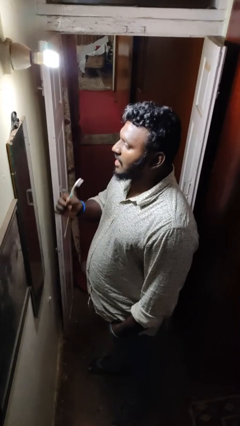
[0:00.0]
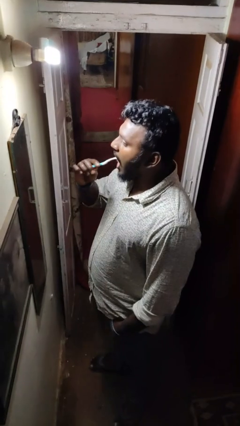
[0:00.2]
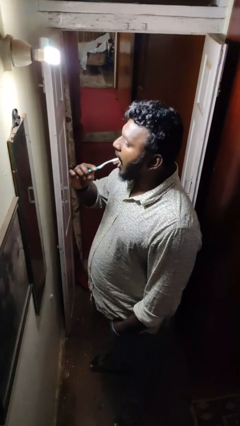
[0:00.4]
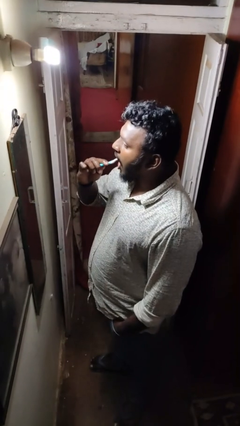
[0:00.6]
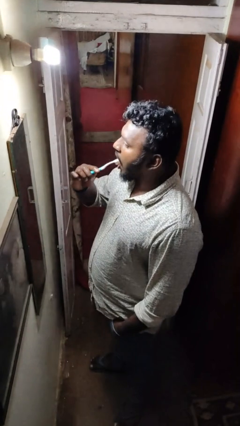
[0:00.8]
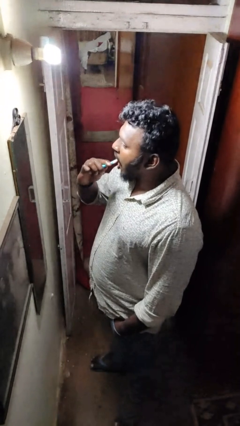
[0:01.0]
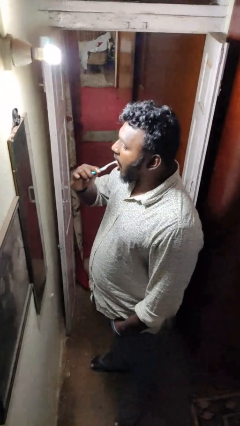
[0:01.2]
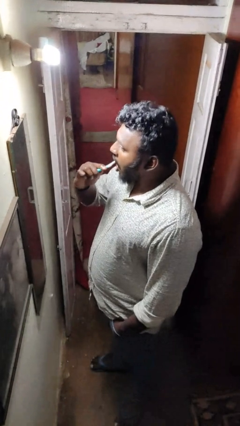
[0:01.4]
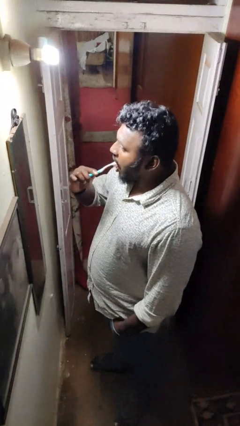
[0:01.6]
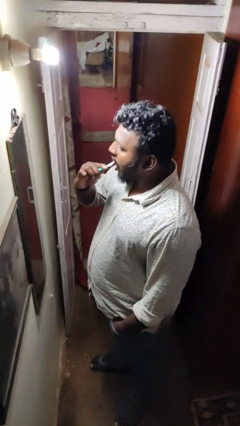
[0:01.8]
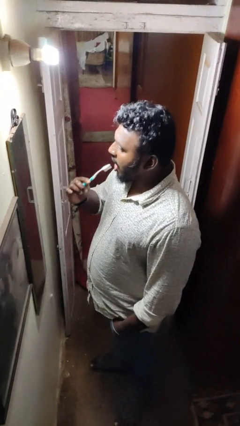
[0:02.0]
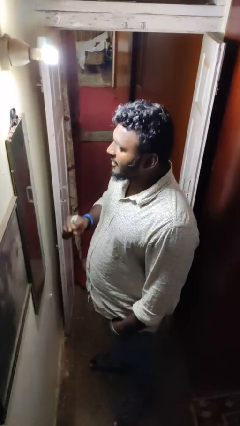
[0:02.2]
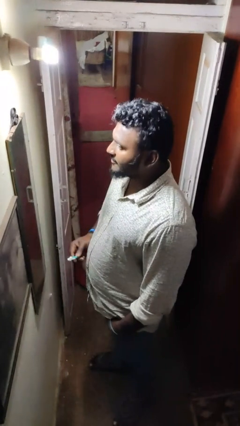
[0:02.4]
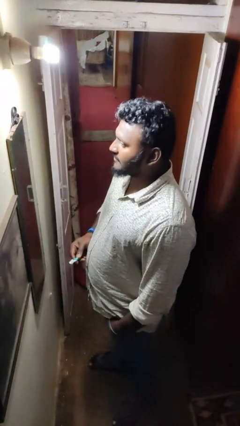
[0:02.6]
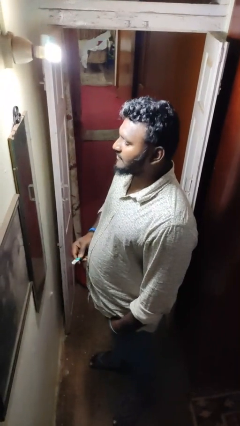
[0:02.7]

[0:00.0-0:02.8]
person brushes teeth

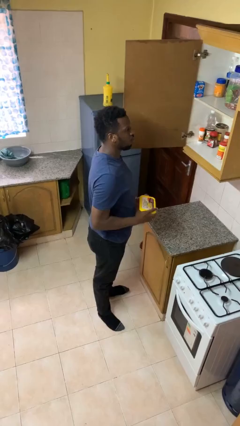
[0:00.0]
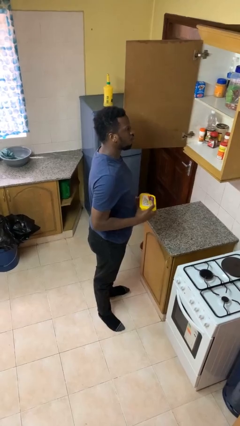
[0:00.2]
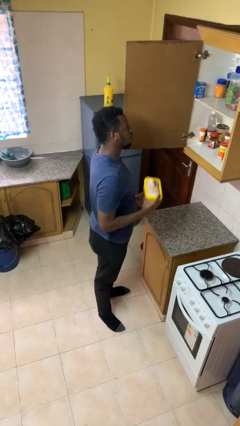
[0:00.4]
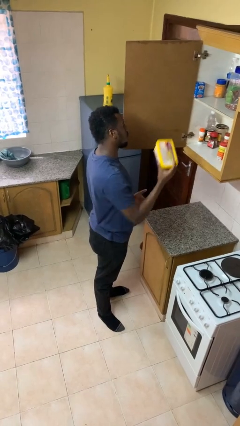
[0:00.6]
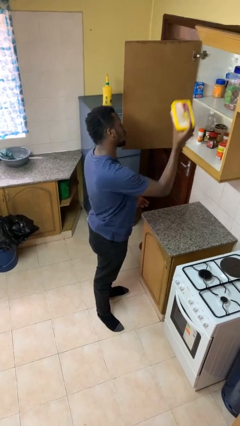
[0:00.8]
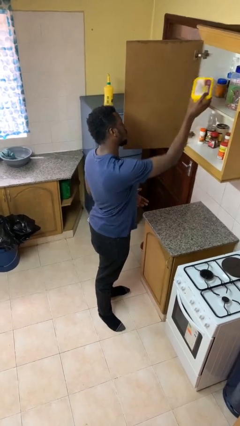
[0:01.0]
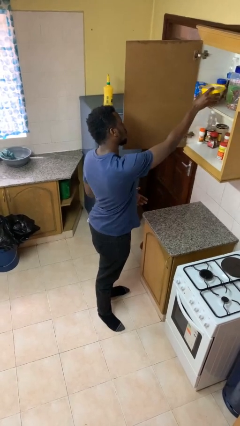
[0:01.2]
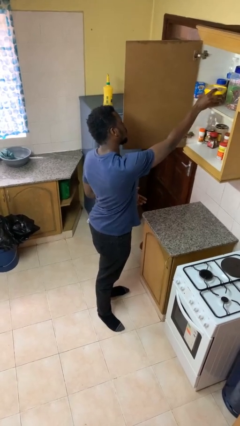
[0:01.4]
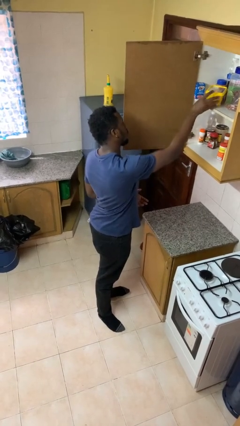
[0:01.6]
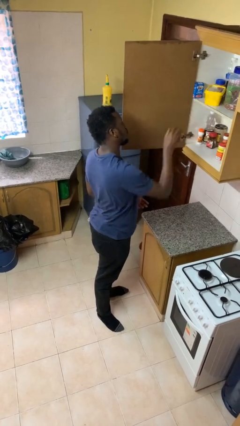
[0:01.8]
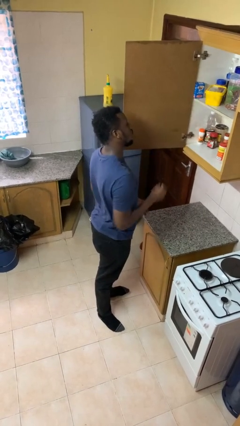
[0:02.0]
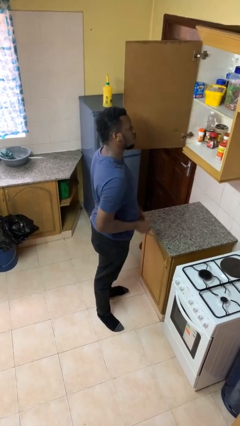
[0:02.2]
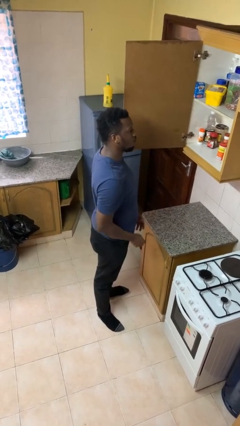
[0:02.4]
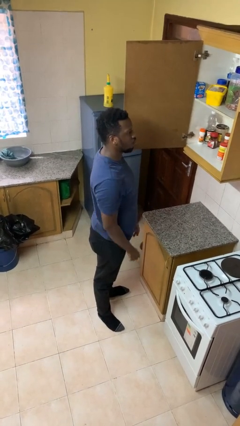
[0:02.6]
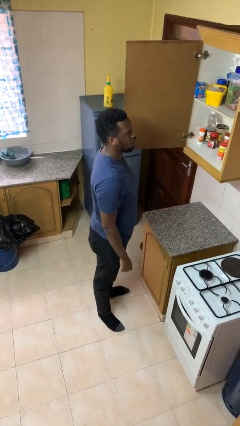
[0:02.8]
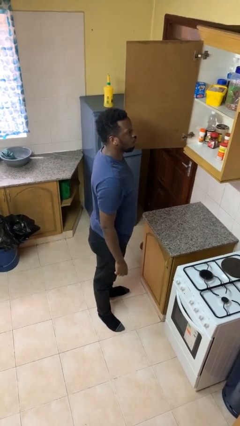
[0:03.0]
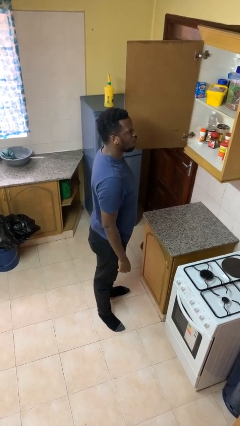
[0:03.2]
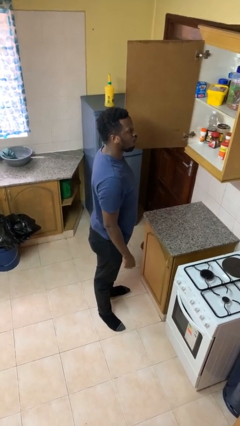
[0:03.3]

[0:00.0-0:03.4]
person puts down object on shelf

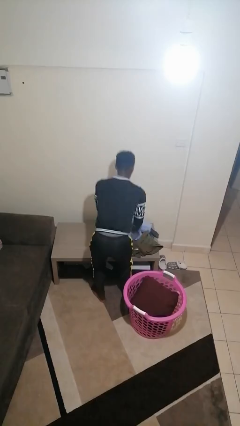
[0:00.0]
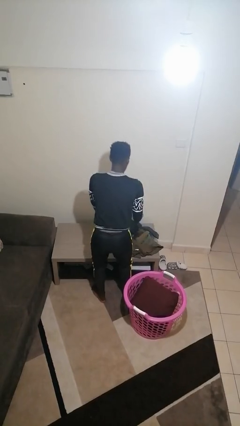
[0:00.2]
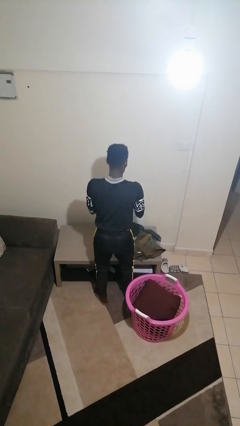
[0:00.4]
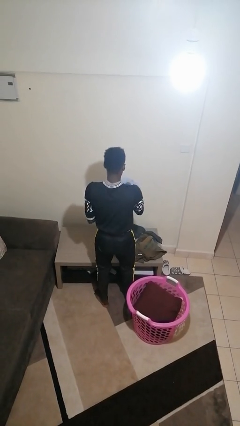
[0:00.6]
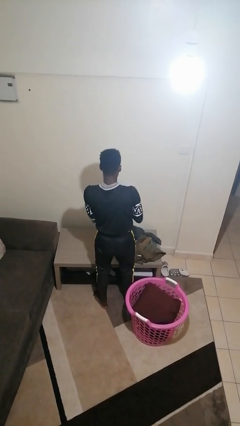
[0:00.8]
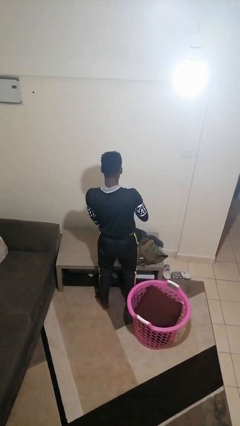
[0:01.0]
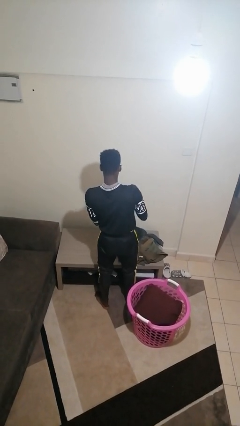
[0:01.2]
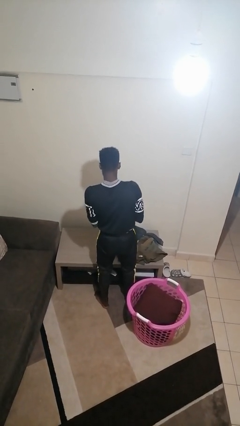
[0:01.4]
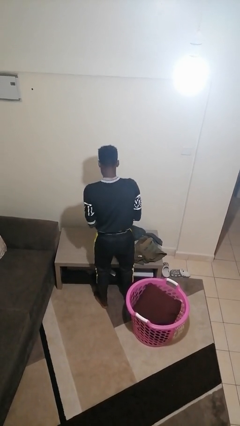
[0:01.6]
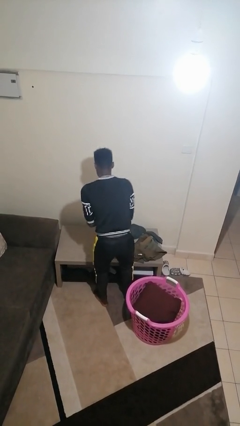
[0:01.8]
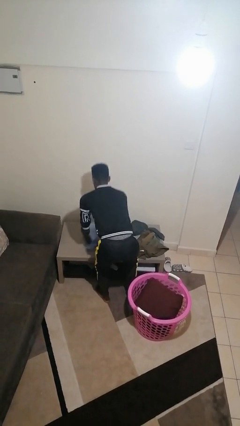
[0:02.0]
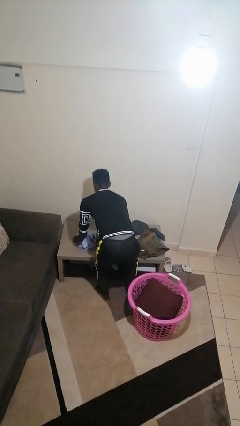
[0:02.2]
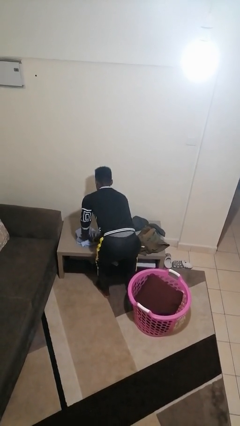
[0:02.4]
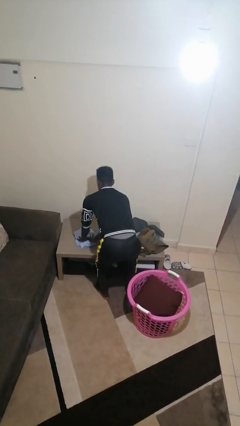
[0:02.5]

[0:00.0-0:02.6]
person folds shirt

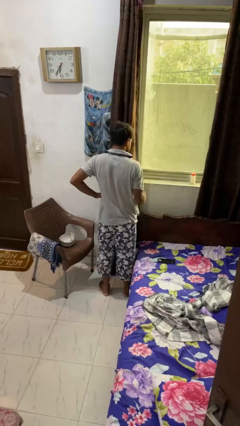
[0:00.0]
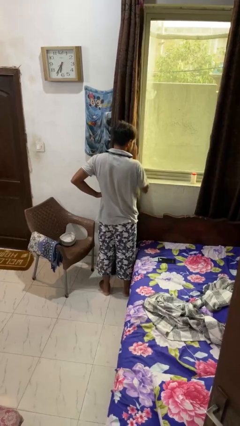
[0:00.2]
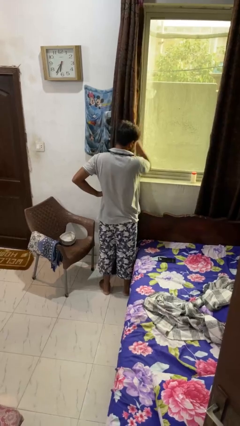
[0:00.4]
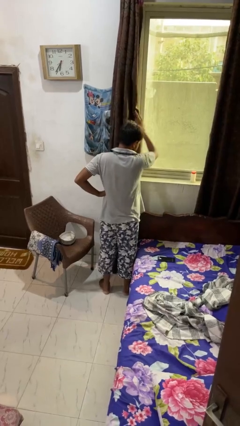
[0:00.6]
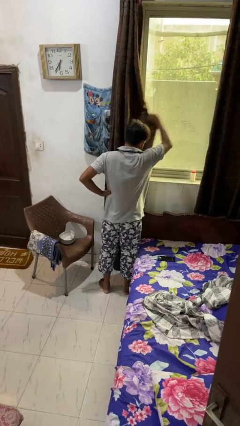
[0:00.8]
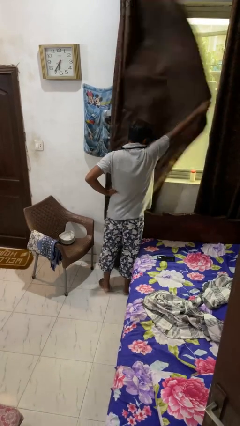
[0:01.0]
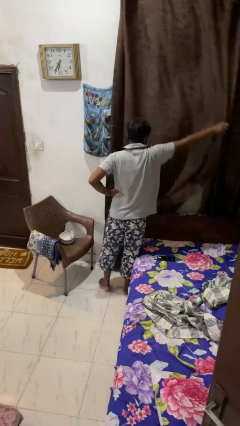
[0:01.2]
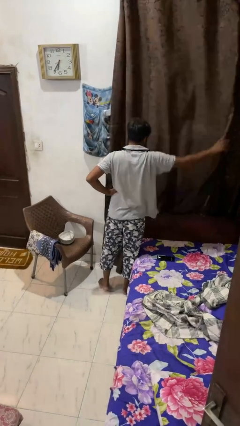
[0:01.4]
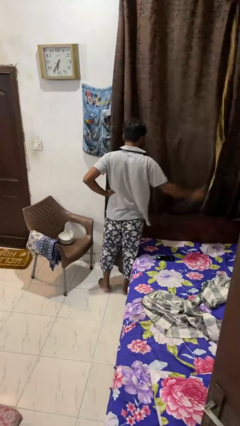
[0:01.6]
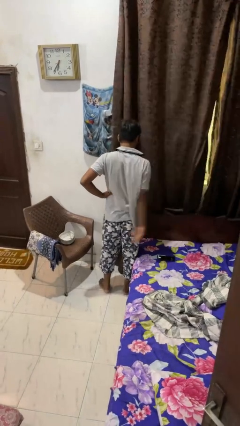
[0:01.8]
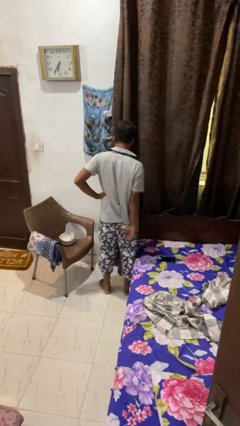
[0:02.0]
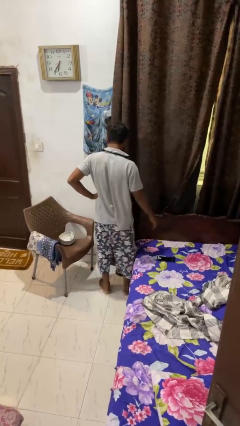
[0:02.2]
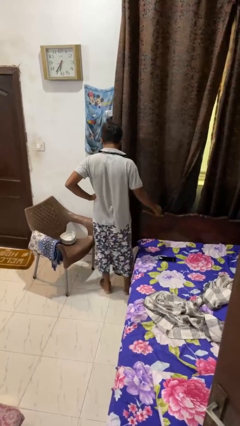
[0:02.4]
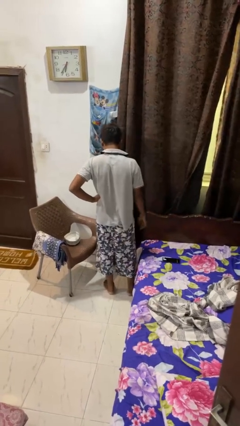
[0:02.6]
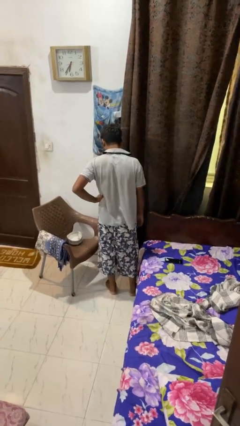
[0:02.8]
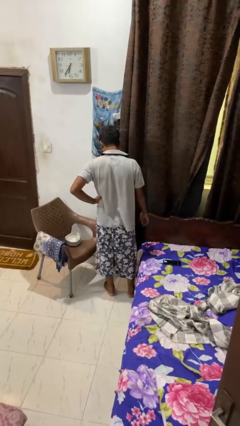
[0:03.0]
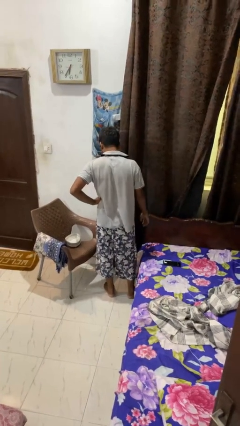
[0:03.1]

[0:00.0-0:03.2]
person closes curtains

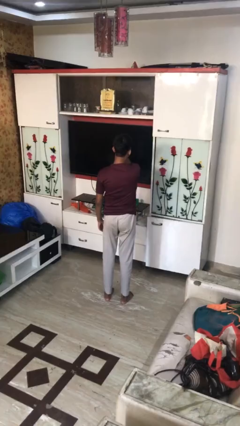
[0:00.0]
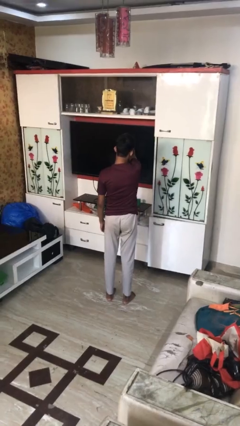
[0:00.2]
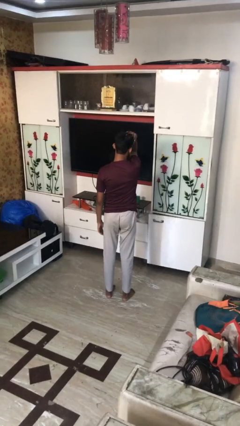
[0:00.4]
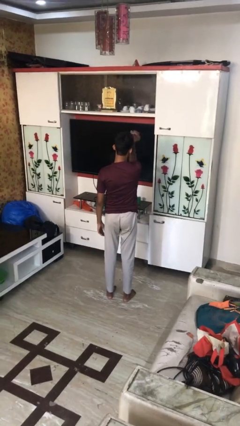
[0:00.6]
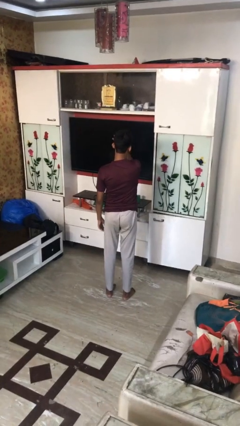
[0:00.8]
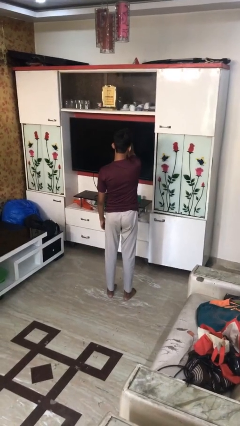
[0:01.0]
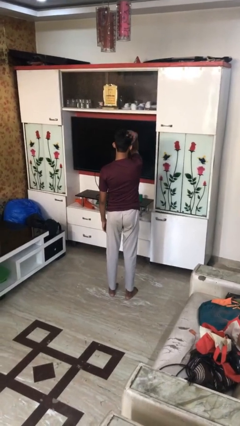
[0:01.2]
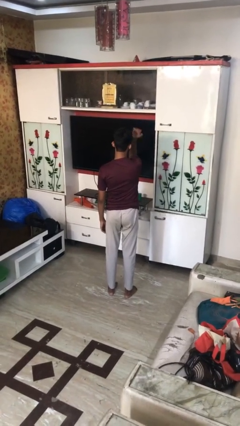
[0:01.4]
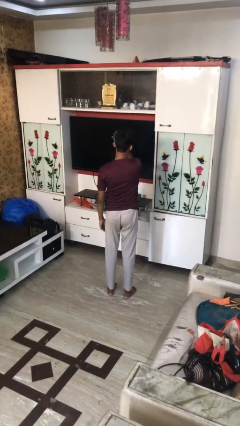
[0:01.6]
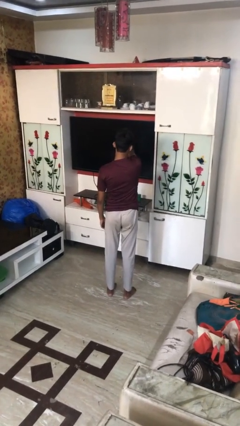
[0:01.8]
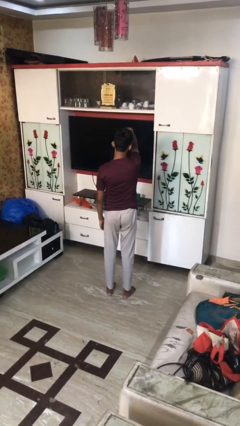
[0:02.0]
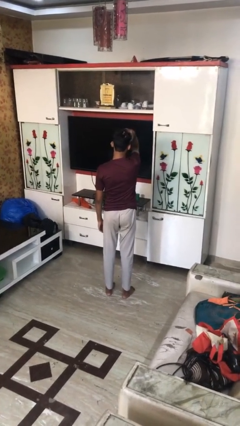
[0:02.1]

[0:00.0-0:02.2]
person strokes hair

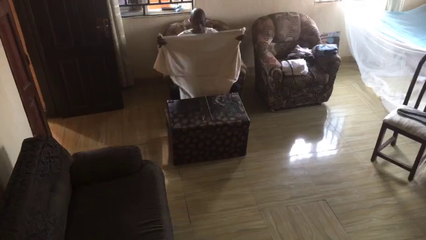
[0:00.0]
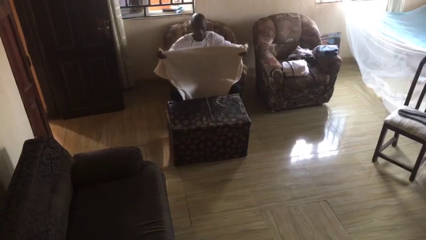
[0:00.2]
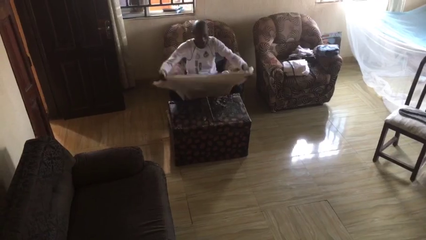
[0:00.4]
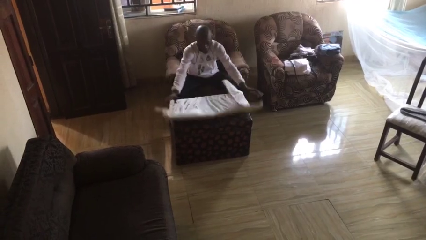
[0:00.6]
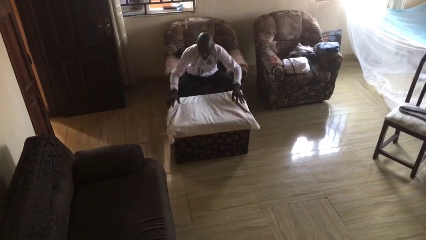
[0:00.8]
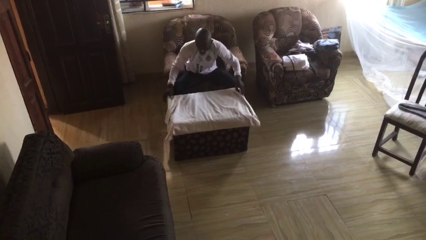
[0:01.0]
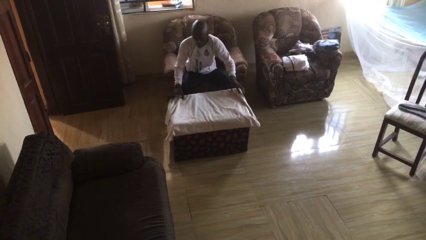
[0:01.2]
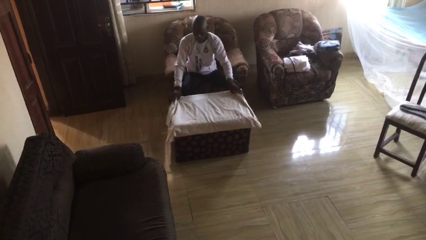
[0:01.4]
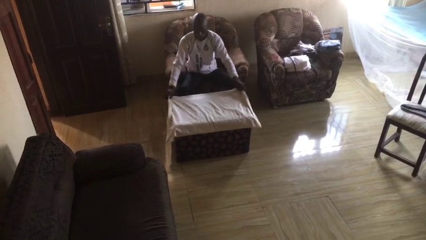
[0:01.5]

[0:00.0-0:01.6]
person spreads tablecloth

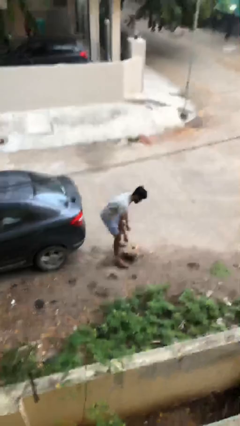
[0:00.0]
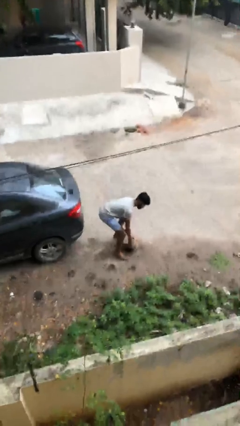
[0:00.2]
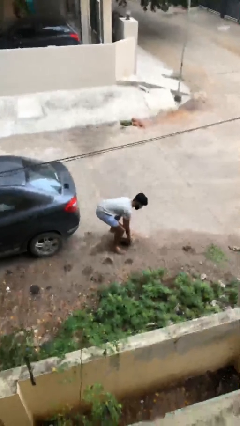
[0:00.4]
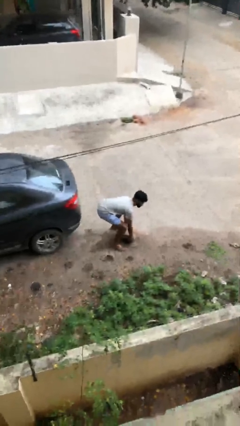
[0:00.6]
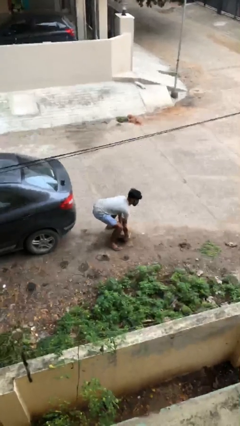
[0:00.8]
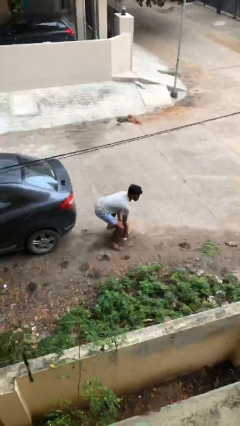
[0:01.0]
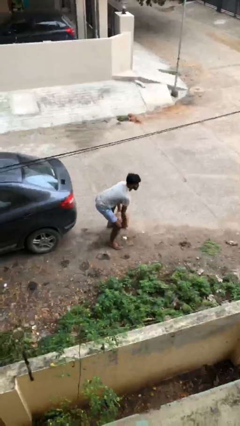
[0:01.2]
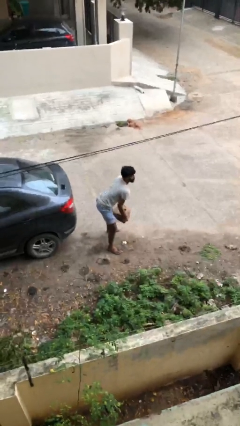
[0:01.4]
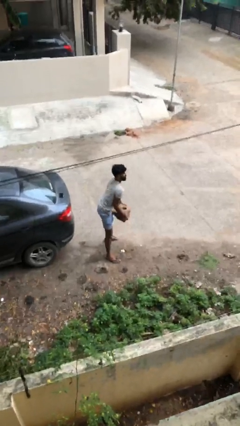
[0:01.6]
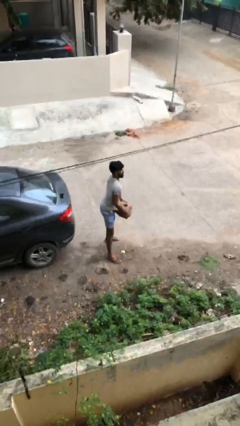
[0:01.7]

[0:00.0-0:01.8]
person picks up object from floor
